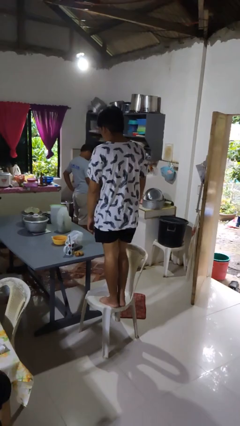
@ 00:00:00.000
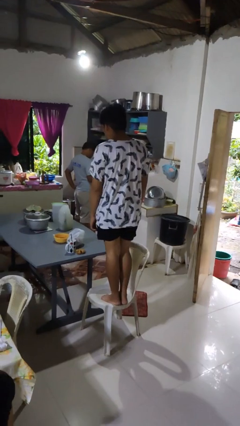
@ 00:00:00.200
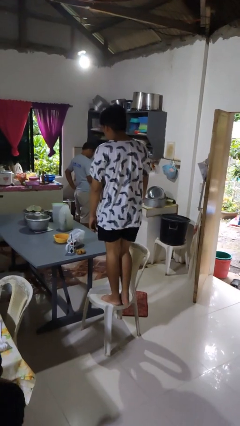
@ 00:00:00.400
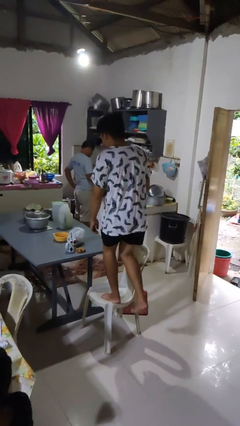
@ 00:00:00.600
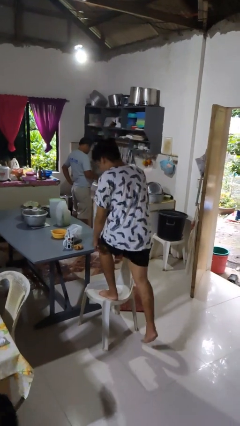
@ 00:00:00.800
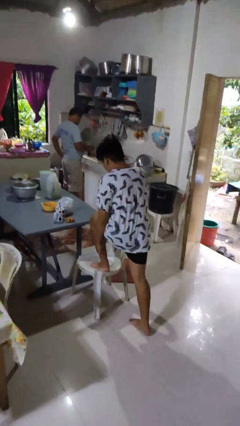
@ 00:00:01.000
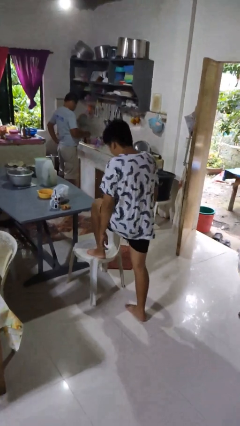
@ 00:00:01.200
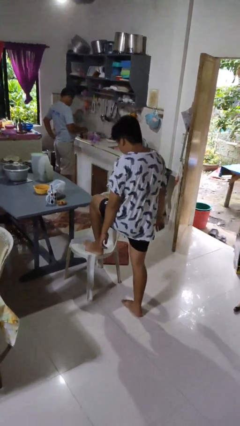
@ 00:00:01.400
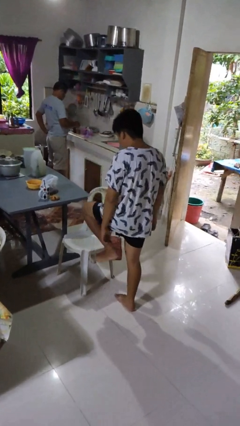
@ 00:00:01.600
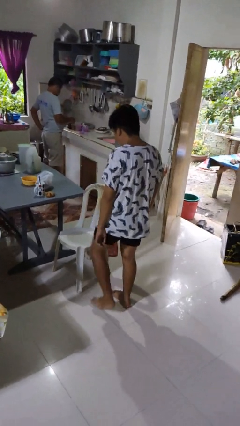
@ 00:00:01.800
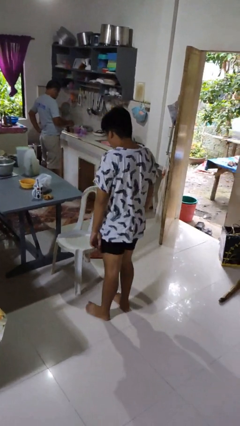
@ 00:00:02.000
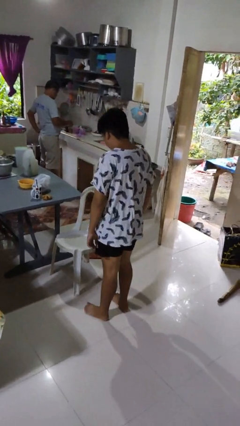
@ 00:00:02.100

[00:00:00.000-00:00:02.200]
person climbs off chair

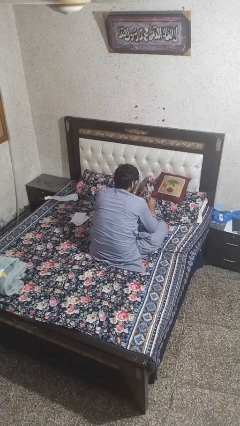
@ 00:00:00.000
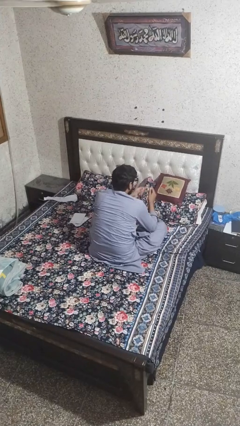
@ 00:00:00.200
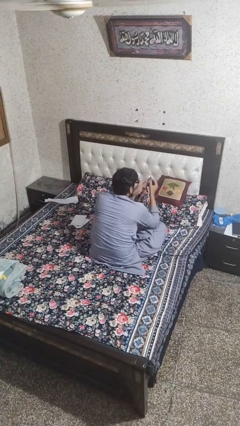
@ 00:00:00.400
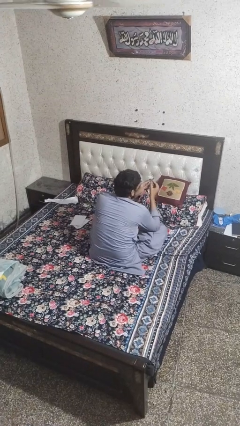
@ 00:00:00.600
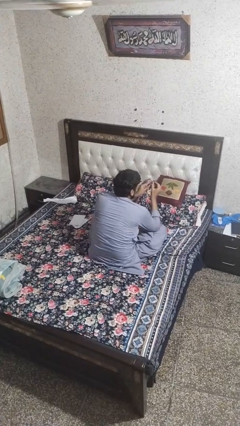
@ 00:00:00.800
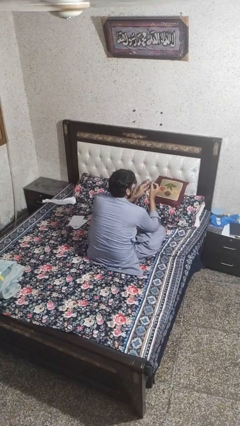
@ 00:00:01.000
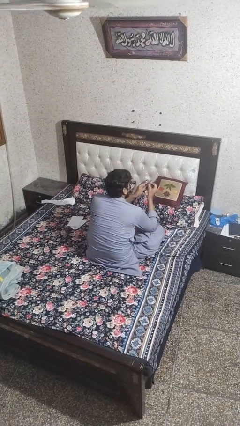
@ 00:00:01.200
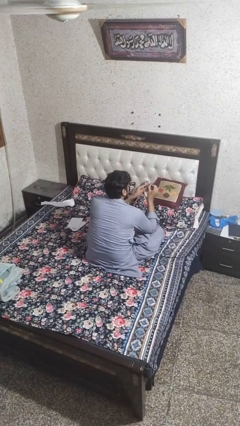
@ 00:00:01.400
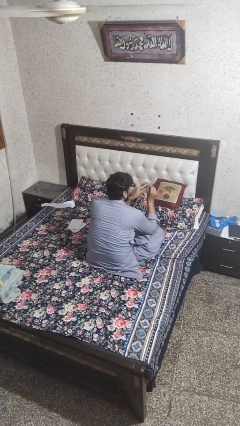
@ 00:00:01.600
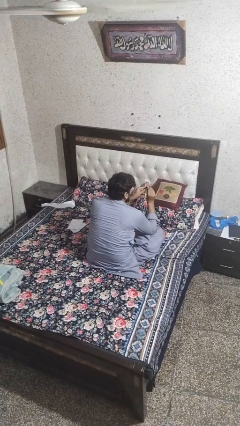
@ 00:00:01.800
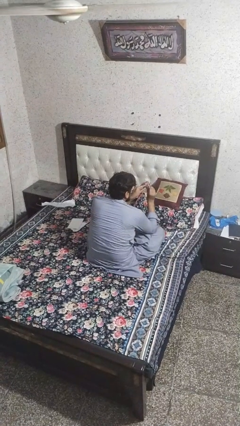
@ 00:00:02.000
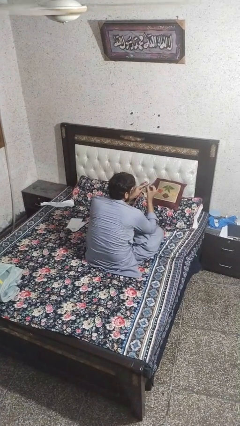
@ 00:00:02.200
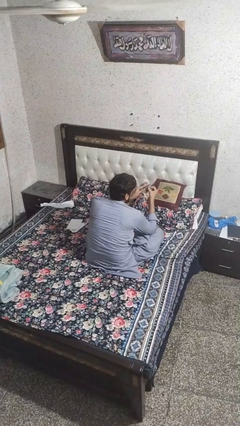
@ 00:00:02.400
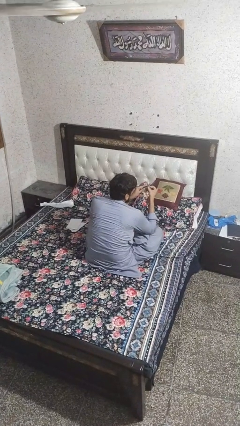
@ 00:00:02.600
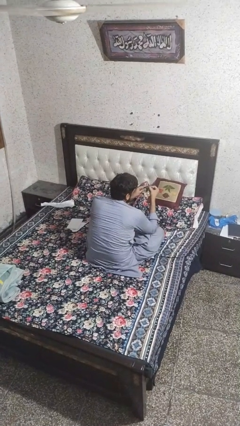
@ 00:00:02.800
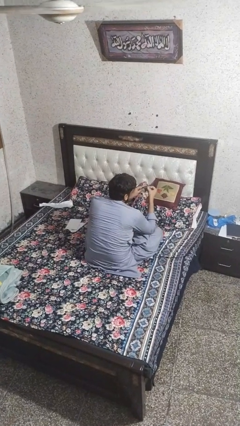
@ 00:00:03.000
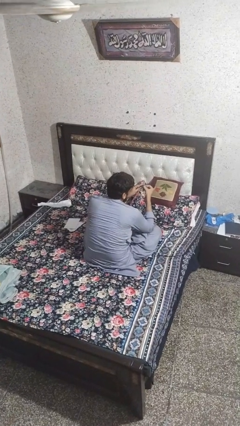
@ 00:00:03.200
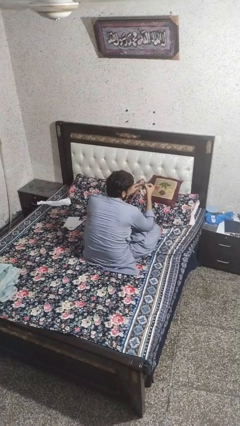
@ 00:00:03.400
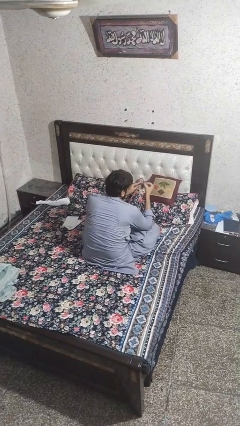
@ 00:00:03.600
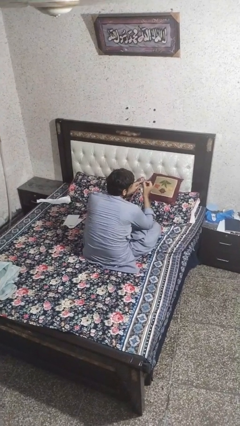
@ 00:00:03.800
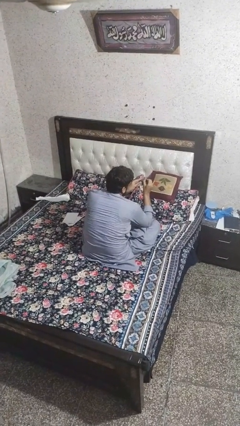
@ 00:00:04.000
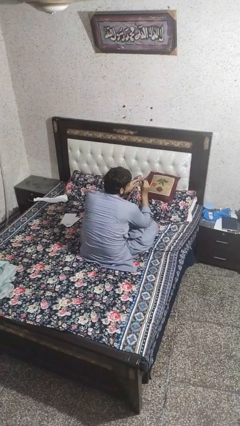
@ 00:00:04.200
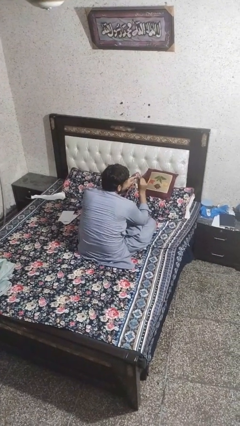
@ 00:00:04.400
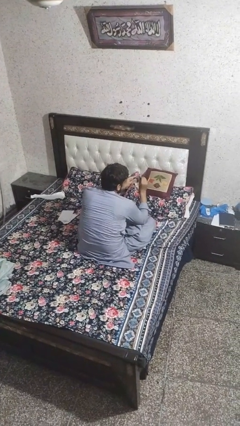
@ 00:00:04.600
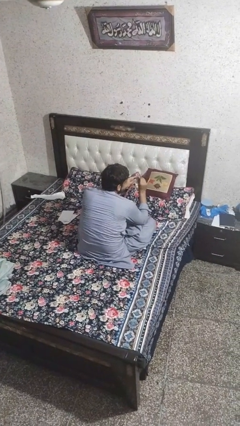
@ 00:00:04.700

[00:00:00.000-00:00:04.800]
person files fingernails

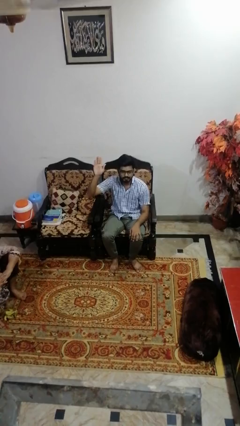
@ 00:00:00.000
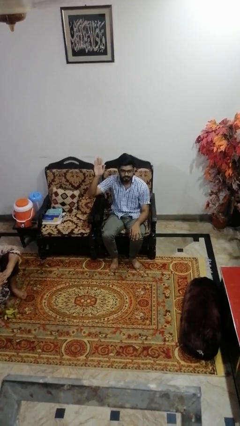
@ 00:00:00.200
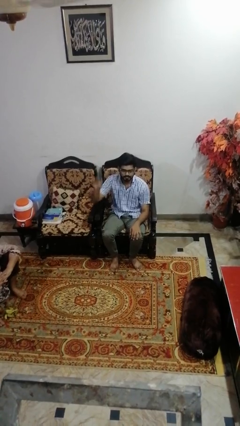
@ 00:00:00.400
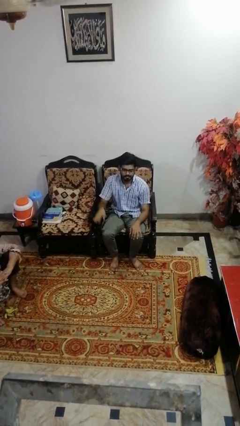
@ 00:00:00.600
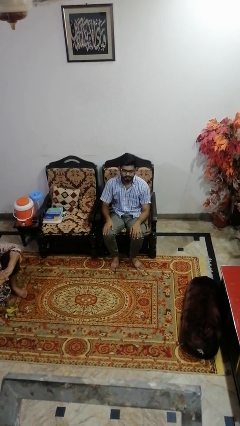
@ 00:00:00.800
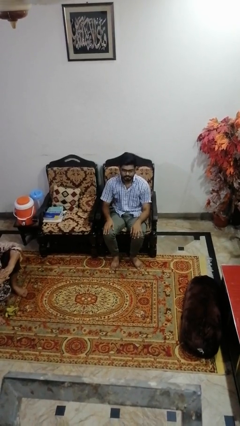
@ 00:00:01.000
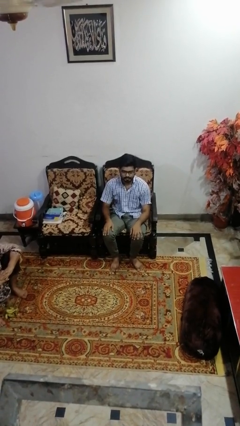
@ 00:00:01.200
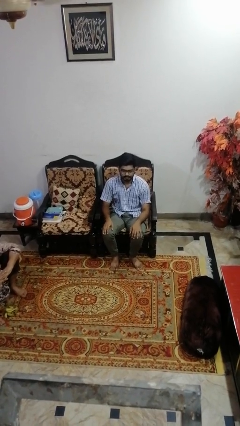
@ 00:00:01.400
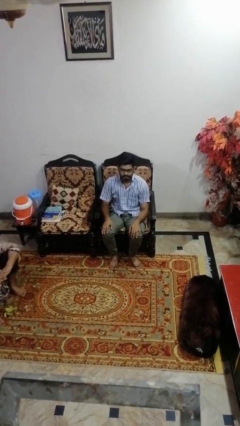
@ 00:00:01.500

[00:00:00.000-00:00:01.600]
person gestures lower hand

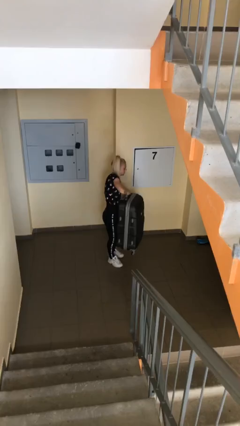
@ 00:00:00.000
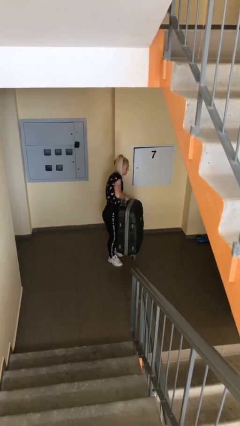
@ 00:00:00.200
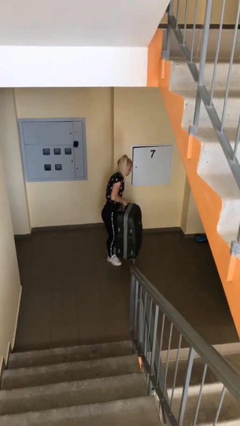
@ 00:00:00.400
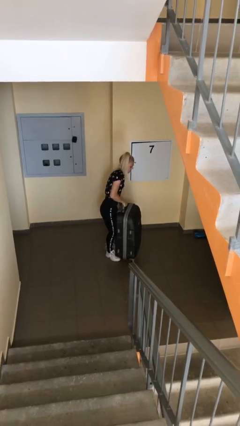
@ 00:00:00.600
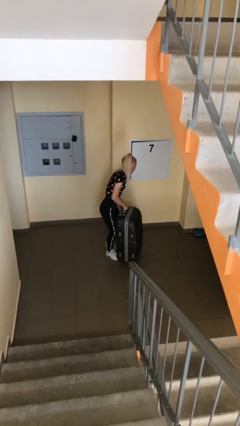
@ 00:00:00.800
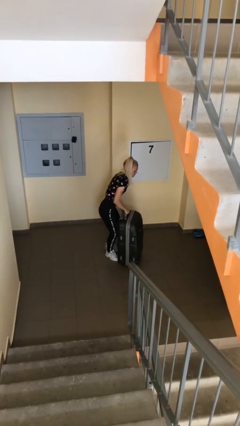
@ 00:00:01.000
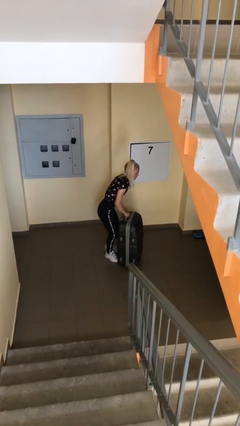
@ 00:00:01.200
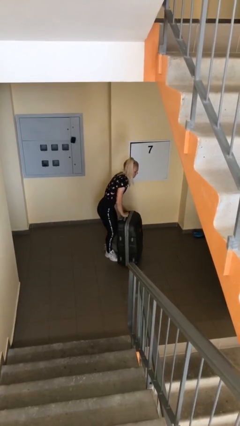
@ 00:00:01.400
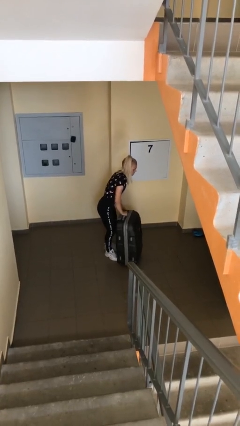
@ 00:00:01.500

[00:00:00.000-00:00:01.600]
person puts down object on floor

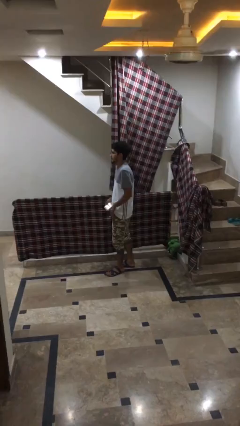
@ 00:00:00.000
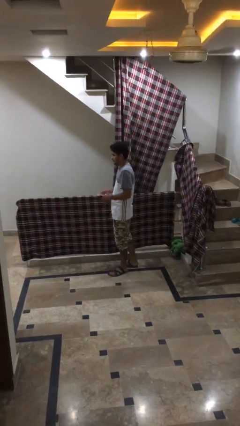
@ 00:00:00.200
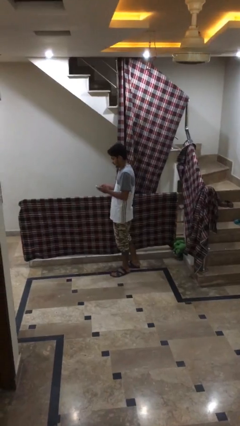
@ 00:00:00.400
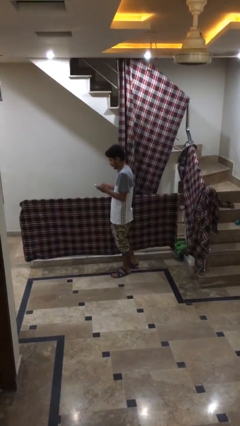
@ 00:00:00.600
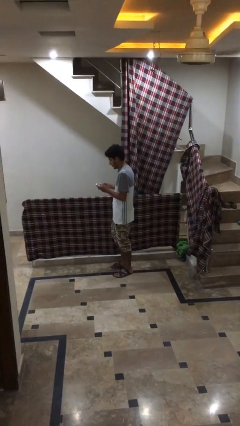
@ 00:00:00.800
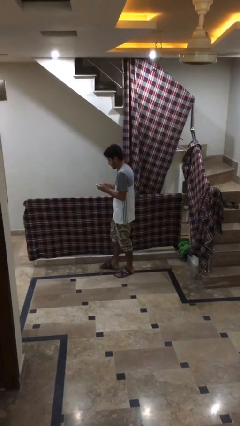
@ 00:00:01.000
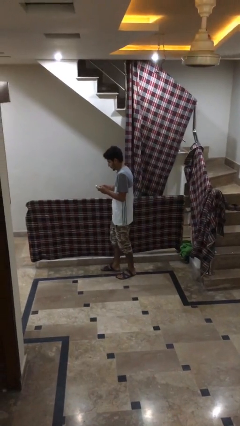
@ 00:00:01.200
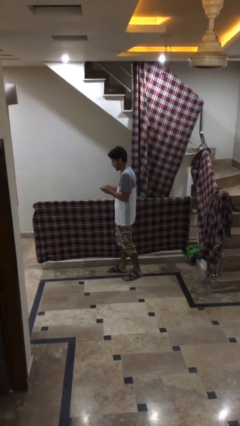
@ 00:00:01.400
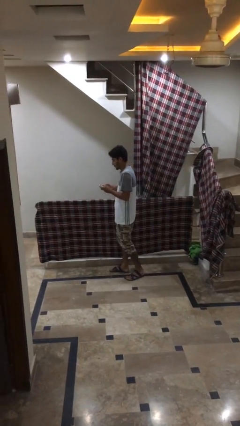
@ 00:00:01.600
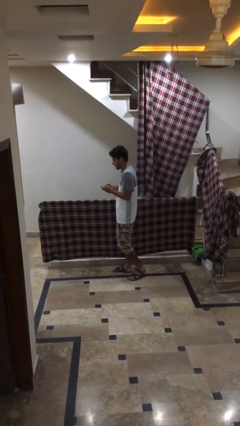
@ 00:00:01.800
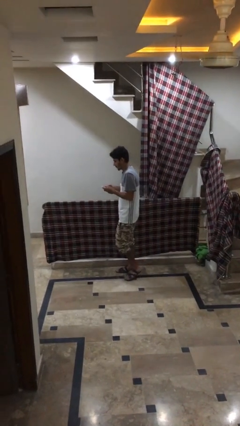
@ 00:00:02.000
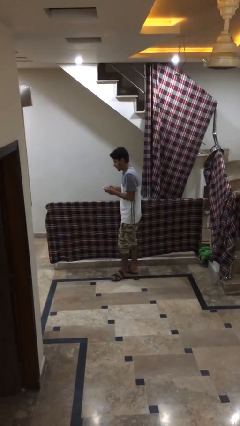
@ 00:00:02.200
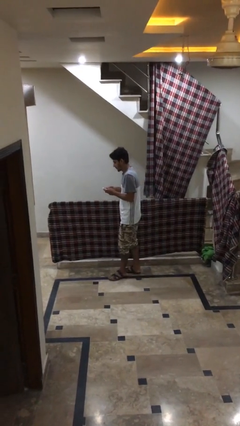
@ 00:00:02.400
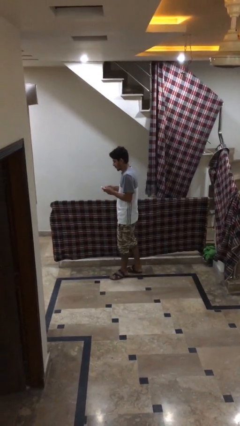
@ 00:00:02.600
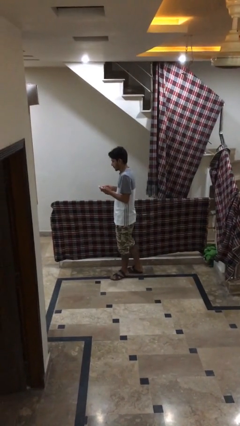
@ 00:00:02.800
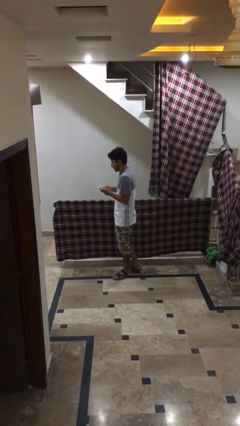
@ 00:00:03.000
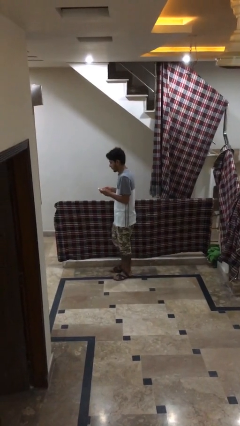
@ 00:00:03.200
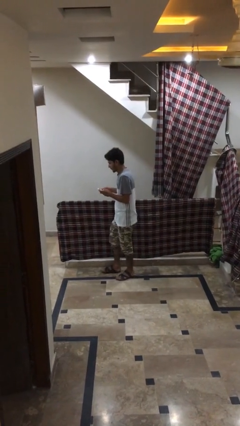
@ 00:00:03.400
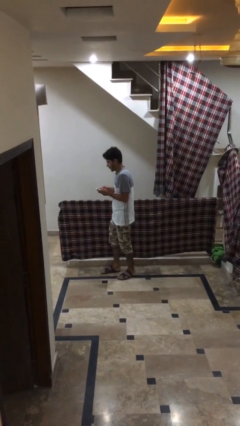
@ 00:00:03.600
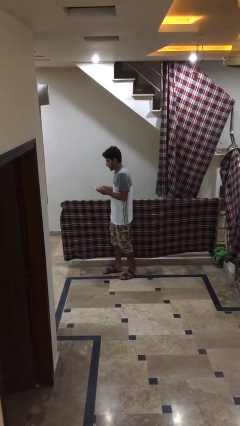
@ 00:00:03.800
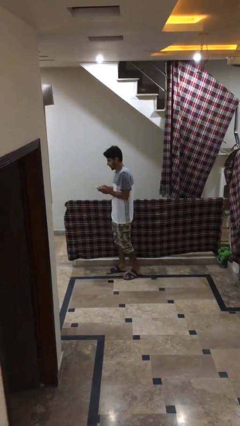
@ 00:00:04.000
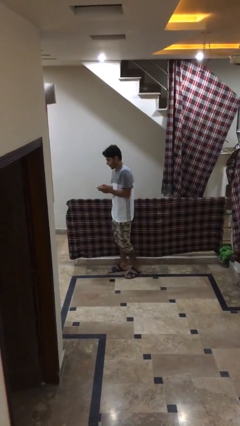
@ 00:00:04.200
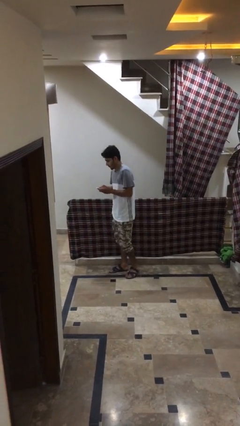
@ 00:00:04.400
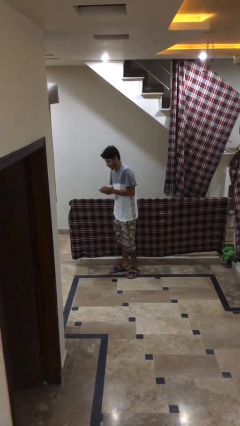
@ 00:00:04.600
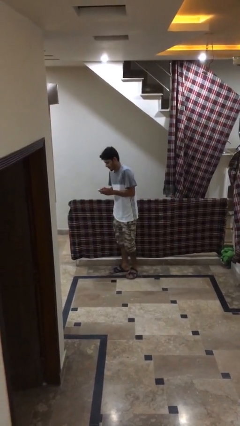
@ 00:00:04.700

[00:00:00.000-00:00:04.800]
person texts on phone

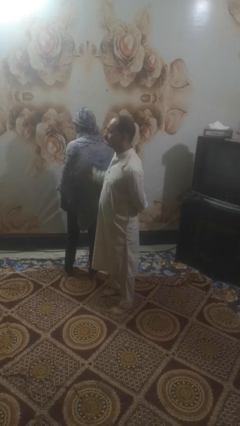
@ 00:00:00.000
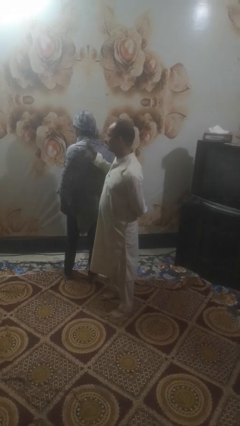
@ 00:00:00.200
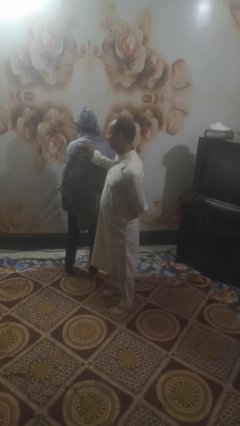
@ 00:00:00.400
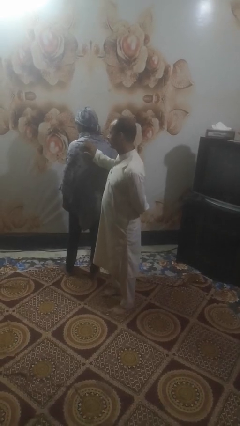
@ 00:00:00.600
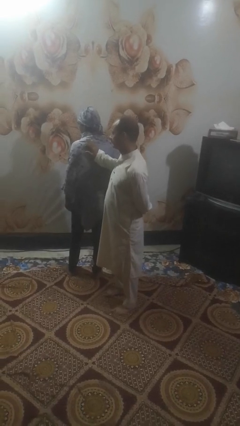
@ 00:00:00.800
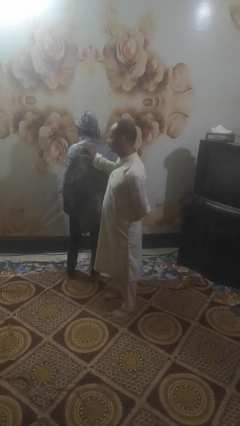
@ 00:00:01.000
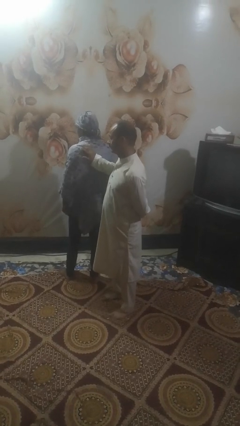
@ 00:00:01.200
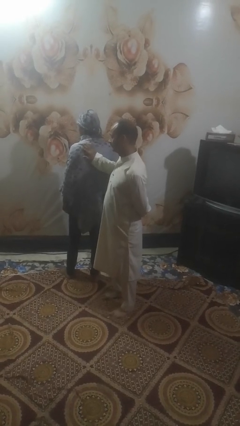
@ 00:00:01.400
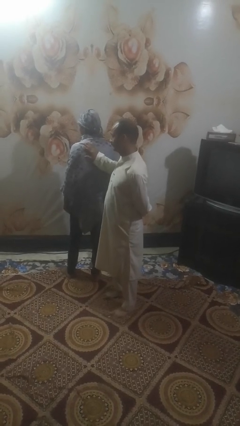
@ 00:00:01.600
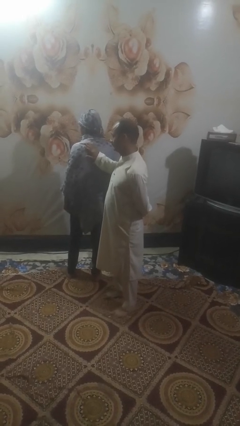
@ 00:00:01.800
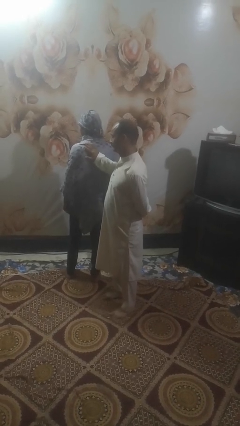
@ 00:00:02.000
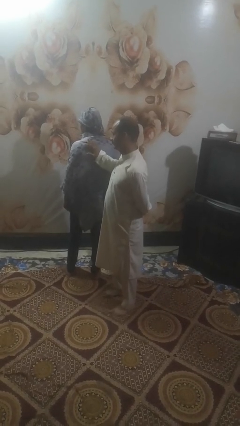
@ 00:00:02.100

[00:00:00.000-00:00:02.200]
person touches back of person
